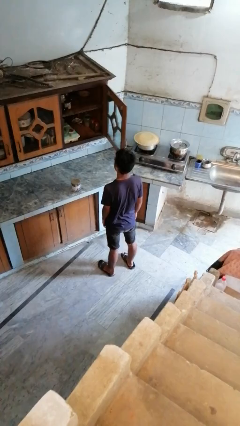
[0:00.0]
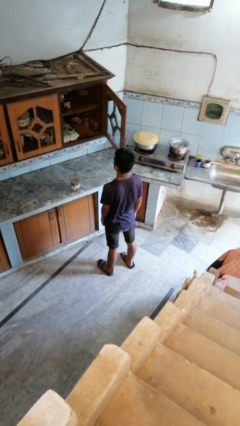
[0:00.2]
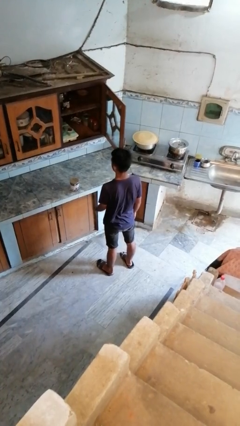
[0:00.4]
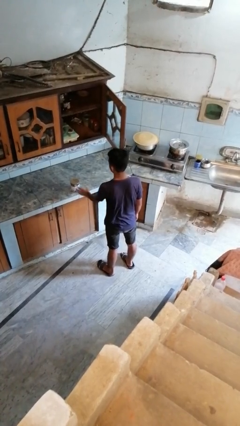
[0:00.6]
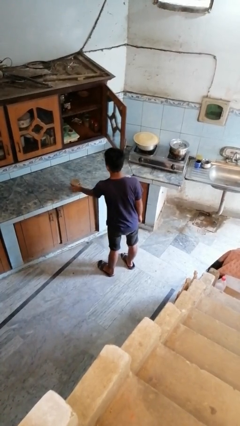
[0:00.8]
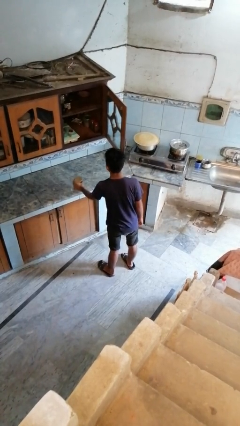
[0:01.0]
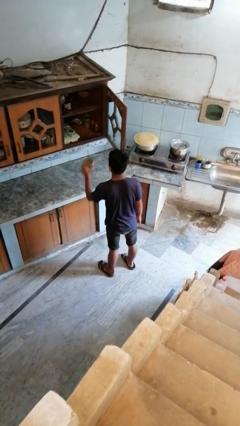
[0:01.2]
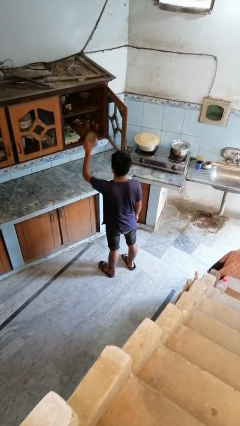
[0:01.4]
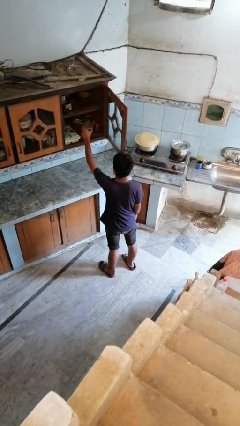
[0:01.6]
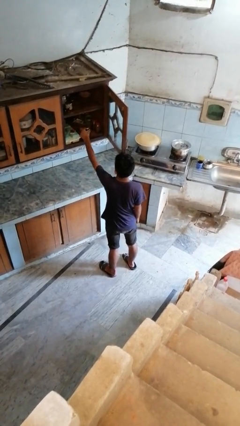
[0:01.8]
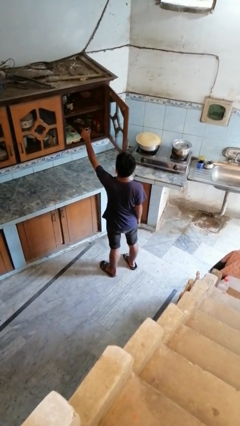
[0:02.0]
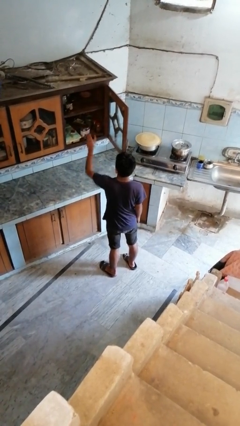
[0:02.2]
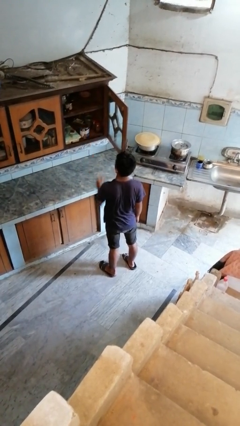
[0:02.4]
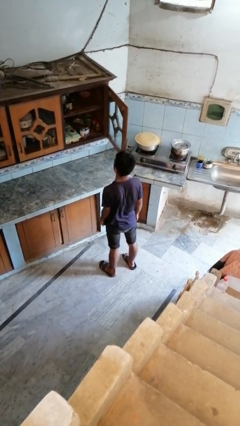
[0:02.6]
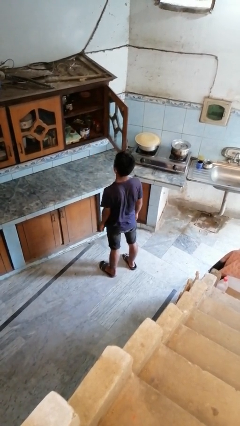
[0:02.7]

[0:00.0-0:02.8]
person puts object in cabinet

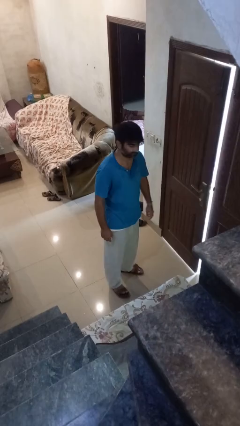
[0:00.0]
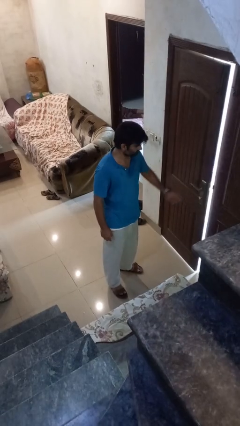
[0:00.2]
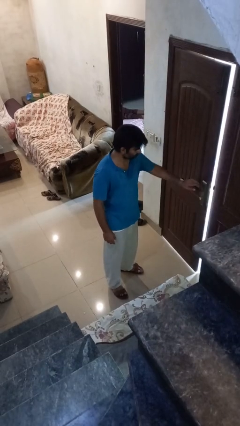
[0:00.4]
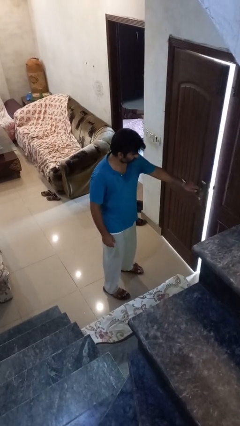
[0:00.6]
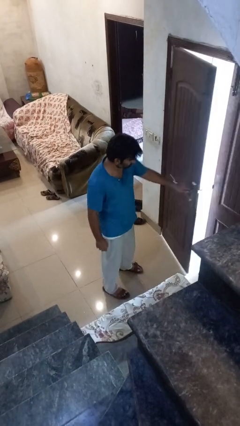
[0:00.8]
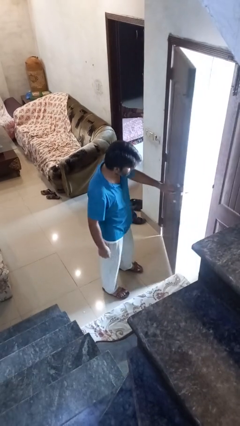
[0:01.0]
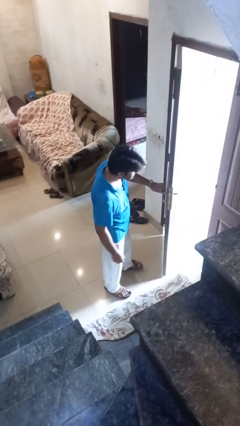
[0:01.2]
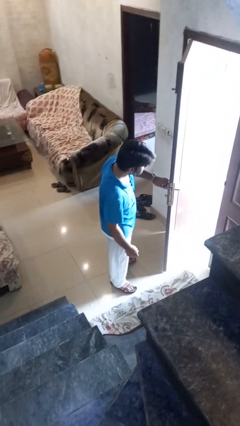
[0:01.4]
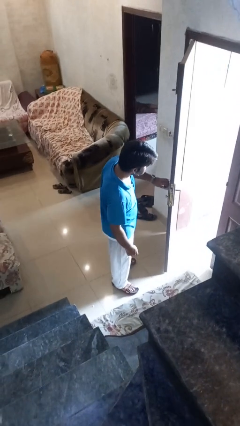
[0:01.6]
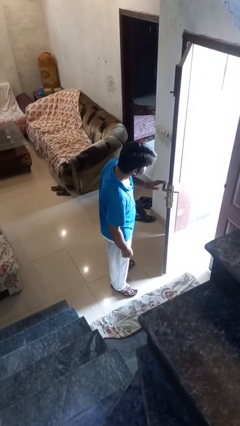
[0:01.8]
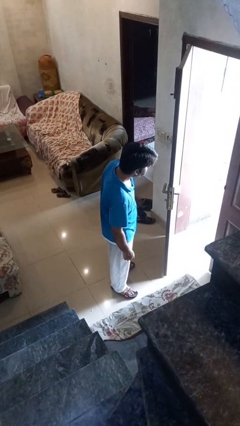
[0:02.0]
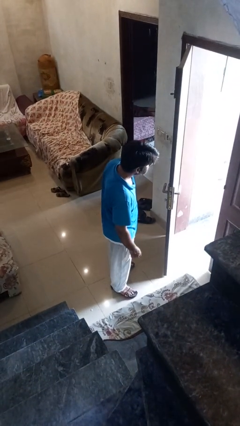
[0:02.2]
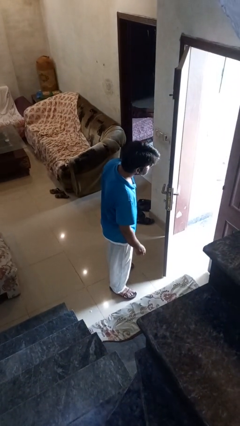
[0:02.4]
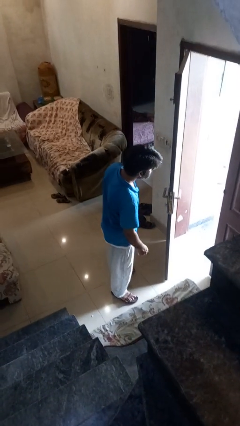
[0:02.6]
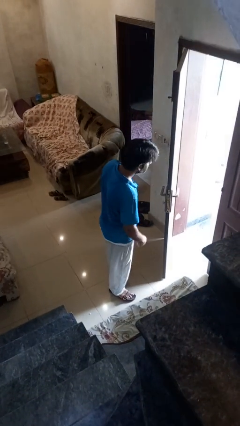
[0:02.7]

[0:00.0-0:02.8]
person opens facility door

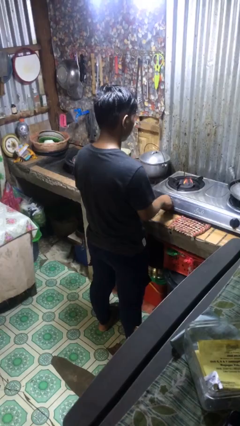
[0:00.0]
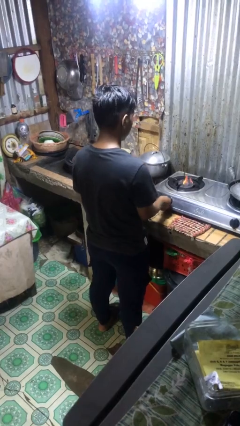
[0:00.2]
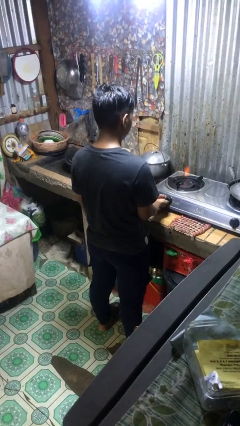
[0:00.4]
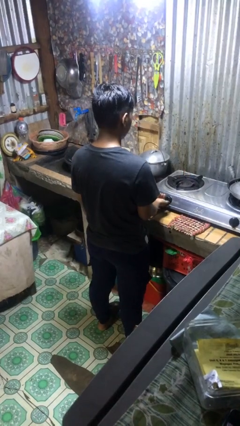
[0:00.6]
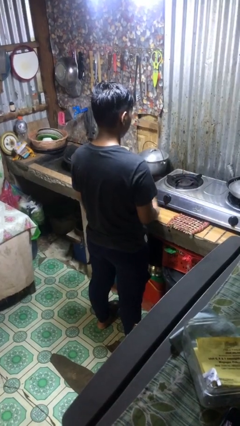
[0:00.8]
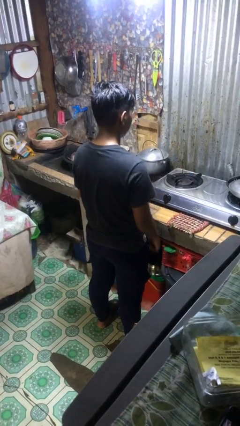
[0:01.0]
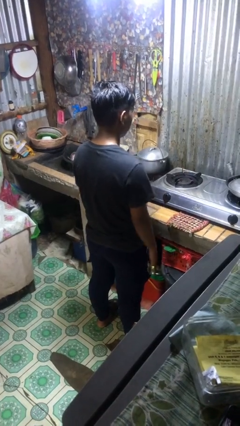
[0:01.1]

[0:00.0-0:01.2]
person turns off stovetop

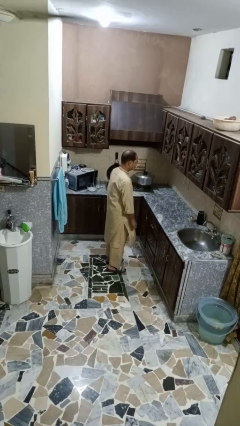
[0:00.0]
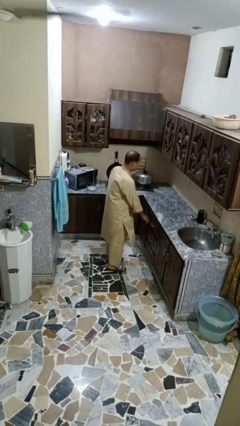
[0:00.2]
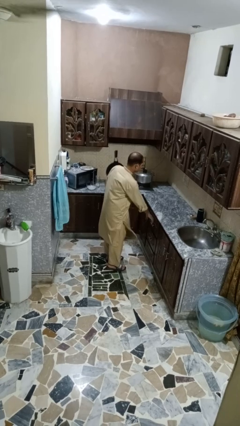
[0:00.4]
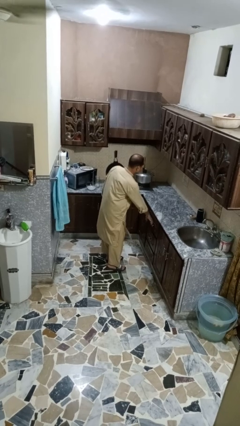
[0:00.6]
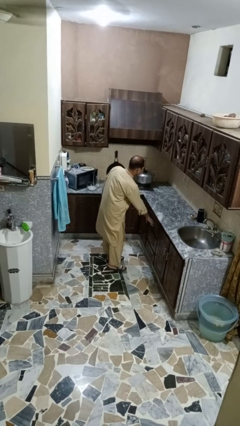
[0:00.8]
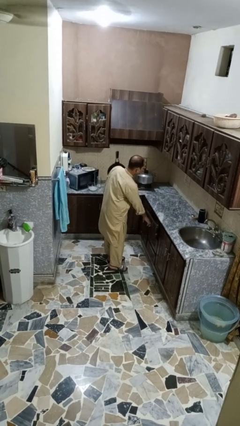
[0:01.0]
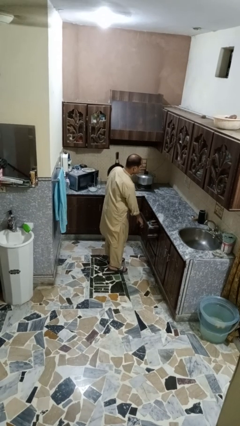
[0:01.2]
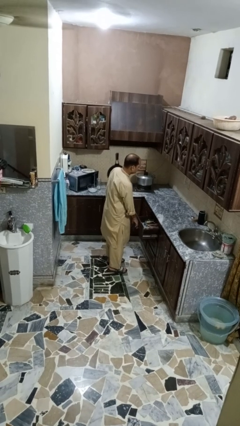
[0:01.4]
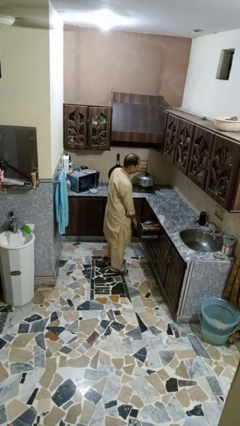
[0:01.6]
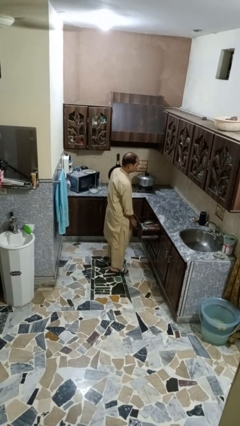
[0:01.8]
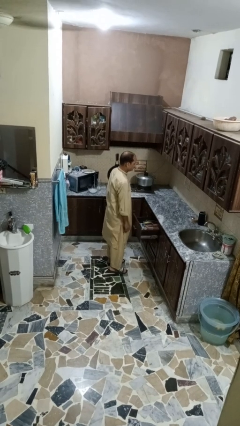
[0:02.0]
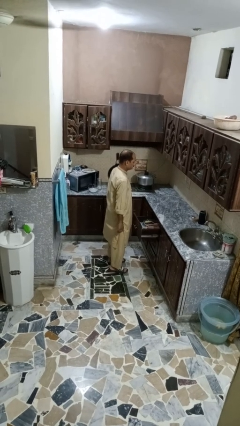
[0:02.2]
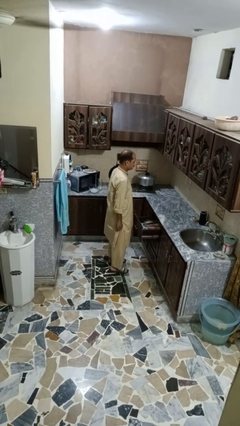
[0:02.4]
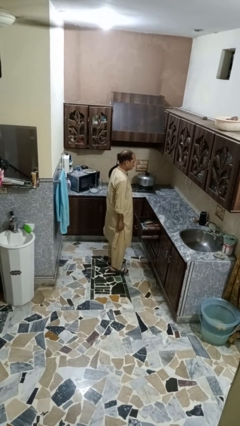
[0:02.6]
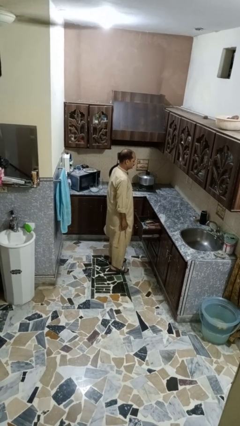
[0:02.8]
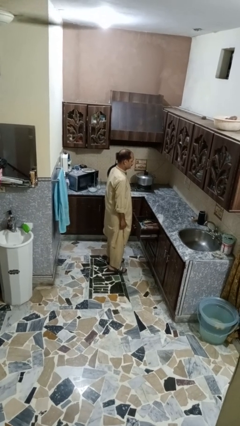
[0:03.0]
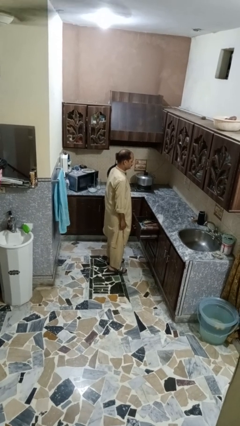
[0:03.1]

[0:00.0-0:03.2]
person opens kitchen drawer

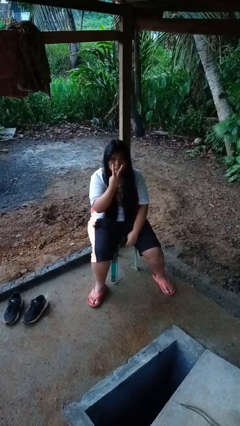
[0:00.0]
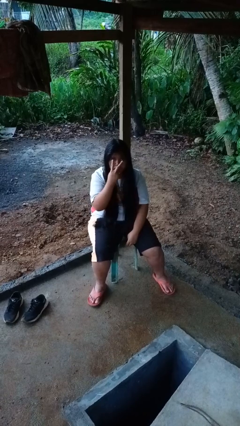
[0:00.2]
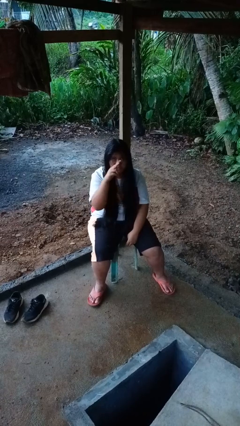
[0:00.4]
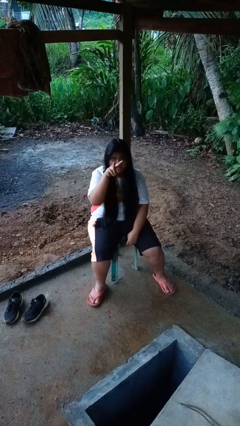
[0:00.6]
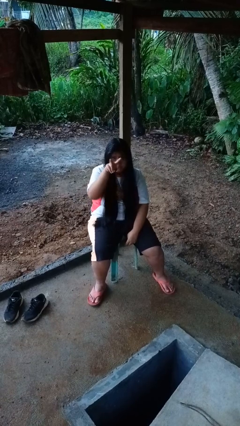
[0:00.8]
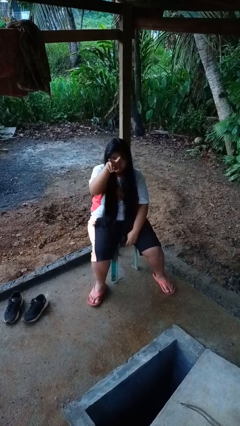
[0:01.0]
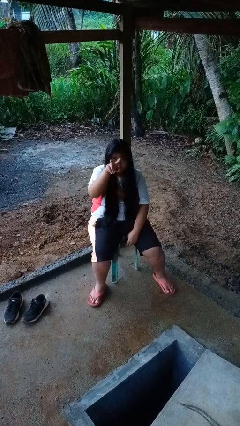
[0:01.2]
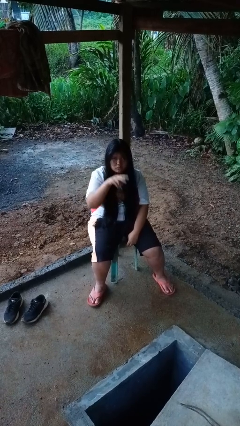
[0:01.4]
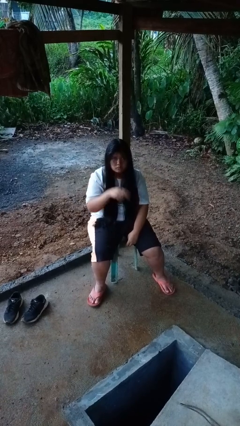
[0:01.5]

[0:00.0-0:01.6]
person gestures watch closely

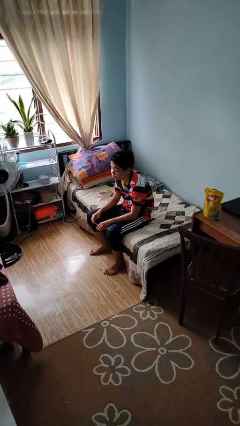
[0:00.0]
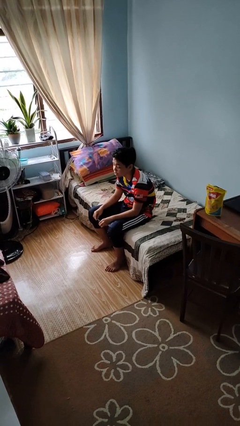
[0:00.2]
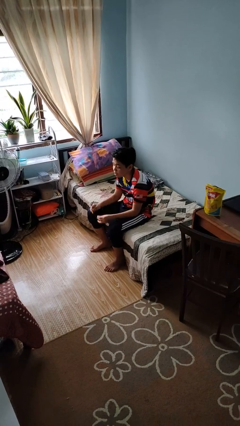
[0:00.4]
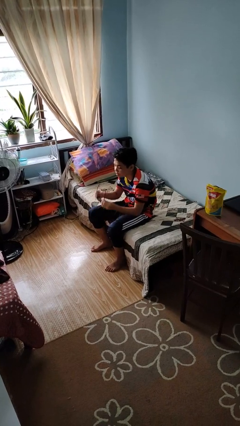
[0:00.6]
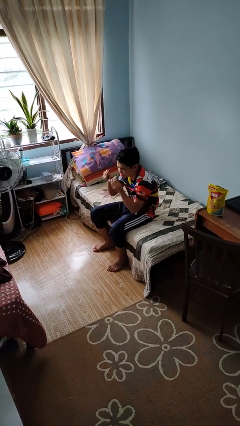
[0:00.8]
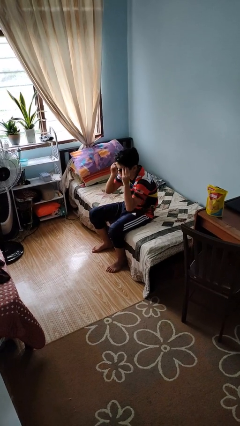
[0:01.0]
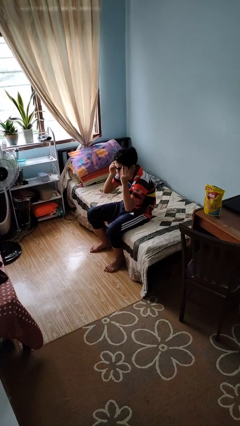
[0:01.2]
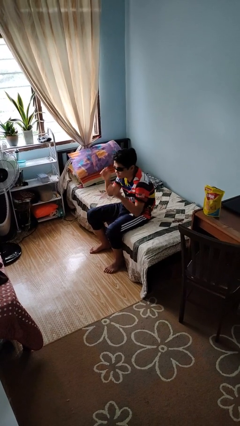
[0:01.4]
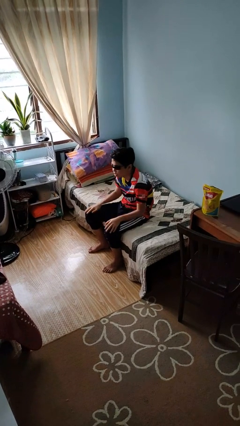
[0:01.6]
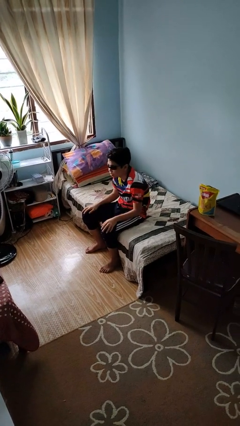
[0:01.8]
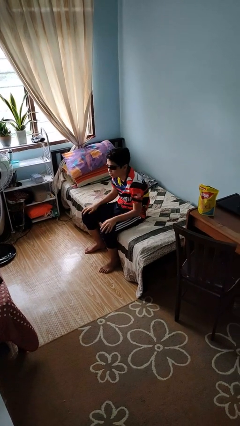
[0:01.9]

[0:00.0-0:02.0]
person puts on glasses

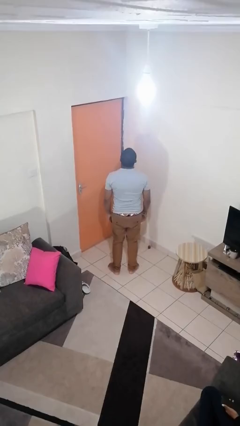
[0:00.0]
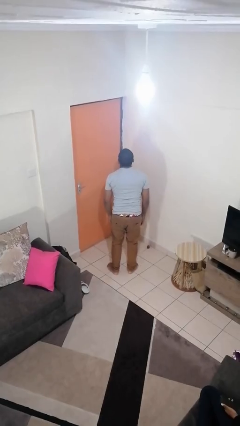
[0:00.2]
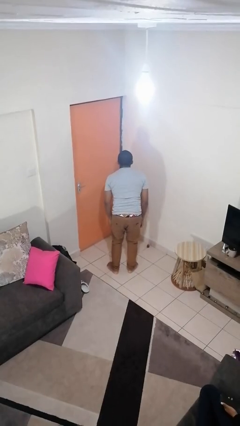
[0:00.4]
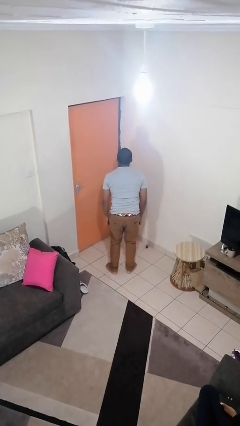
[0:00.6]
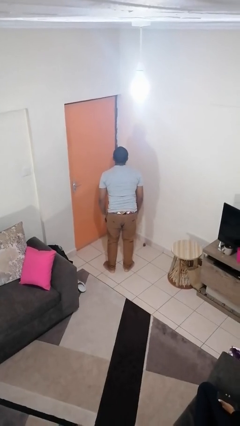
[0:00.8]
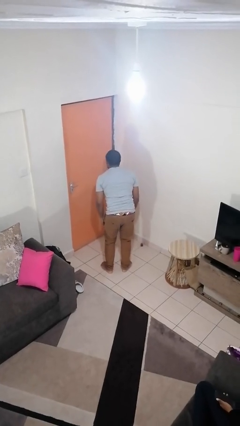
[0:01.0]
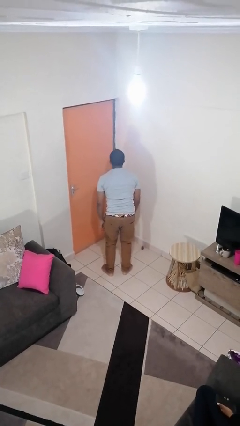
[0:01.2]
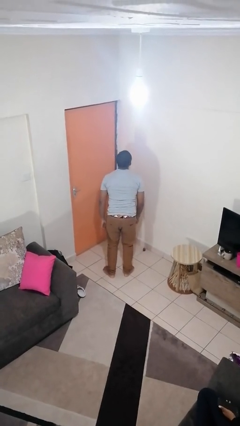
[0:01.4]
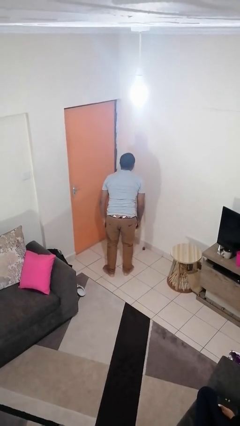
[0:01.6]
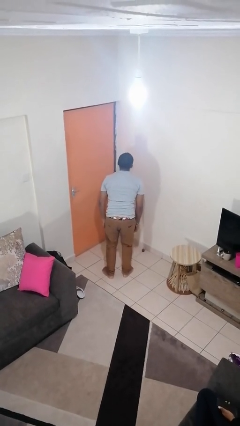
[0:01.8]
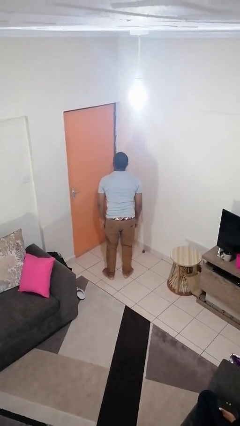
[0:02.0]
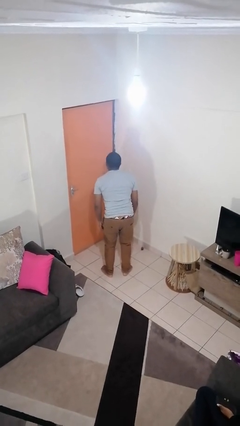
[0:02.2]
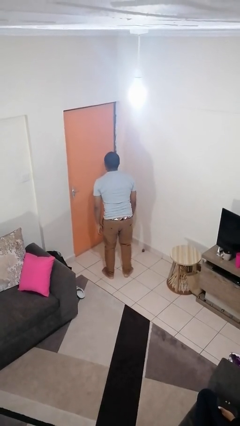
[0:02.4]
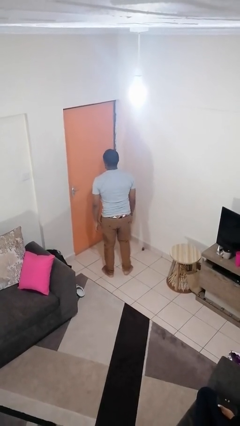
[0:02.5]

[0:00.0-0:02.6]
person sticks out tongue

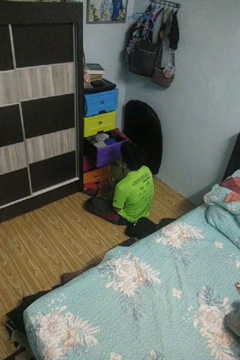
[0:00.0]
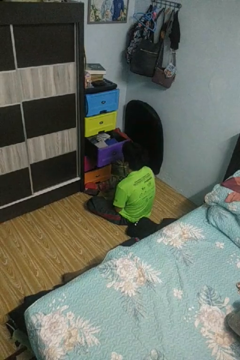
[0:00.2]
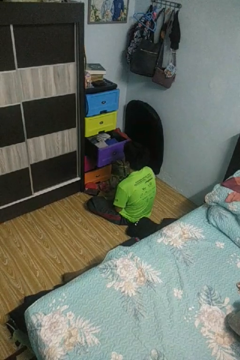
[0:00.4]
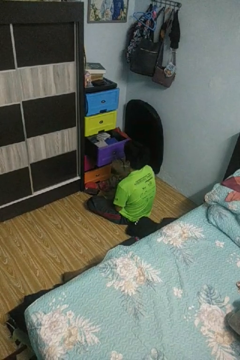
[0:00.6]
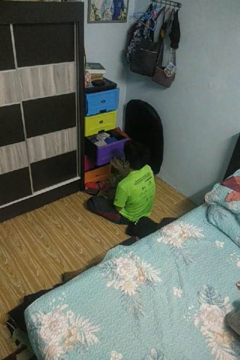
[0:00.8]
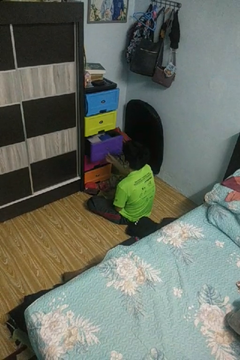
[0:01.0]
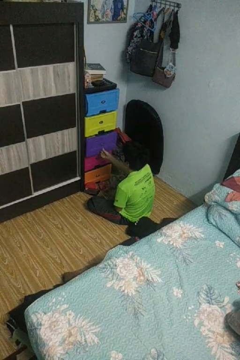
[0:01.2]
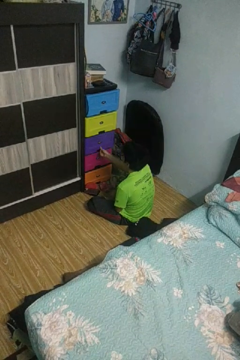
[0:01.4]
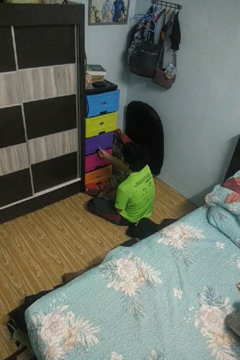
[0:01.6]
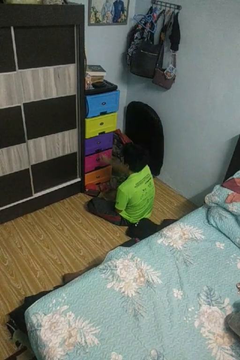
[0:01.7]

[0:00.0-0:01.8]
person closes dresser drawer
